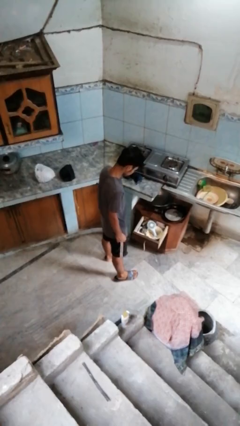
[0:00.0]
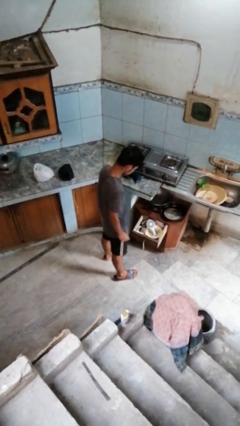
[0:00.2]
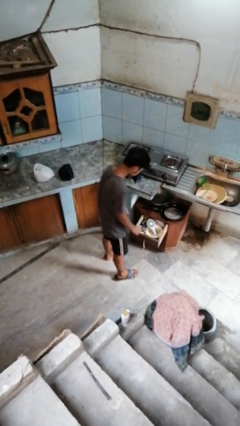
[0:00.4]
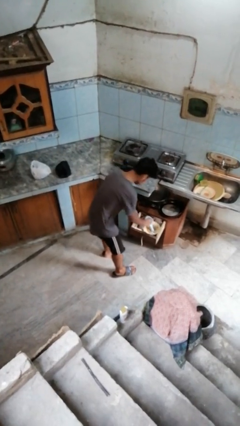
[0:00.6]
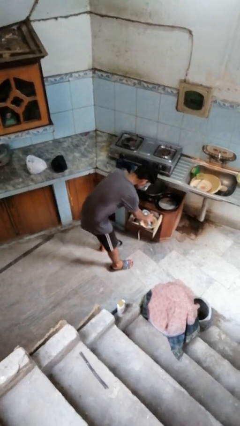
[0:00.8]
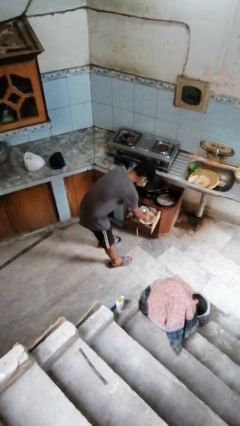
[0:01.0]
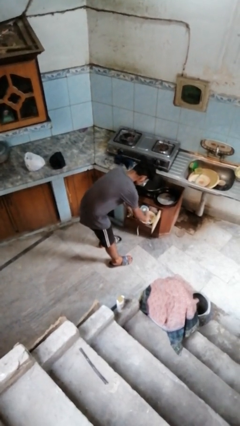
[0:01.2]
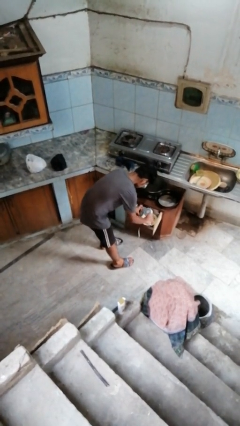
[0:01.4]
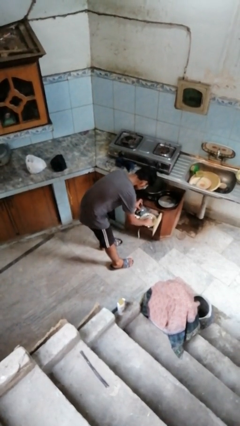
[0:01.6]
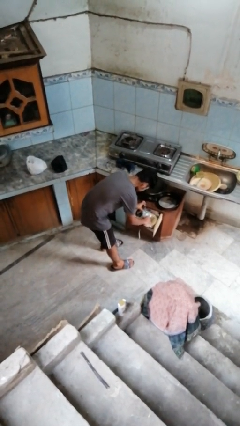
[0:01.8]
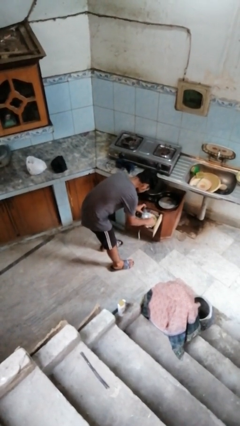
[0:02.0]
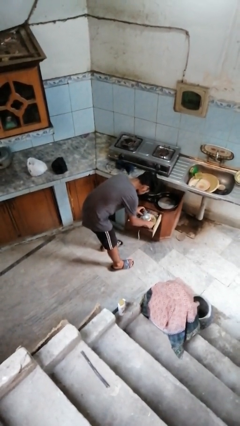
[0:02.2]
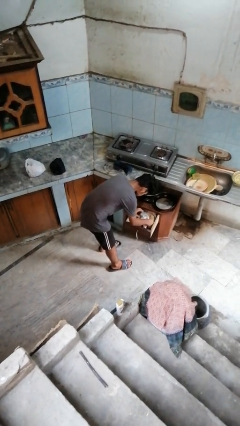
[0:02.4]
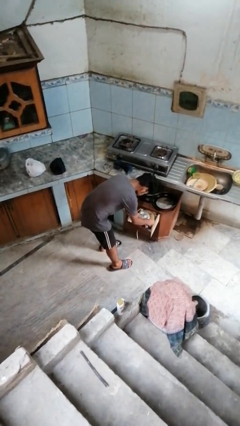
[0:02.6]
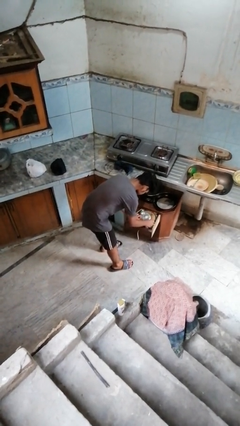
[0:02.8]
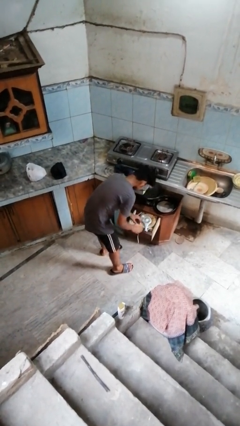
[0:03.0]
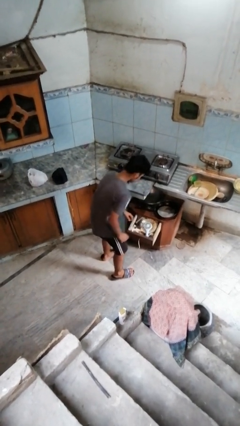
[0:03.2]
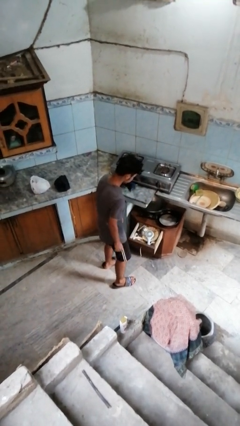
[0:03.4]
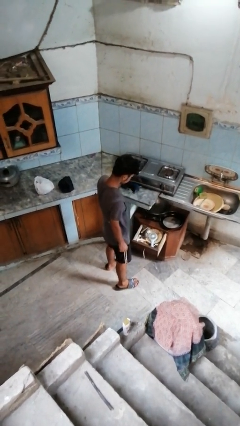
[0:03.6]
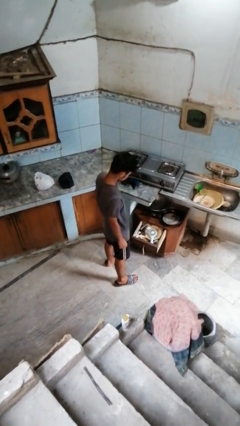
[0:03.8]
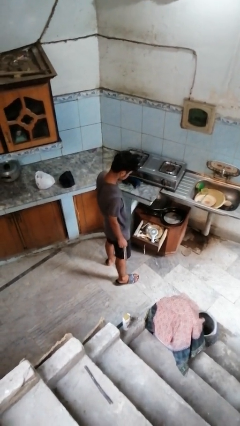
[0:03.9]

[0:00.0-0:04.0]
person searches in kitchen drawer

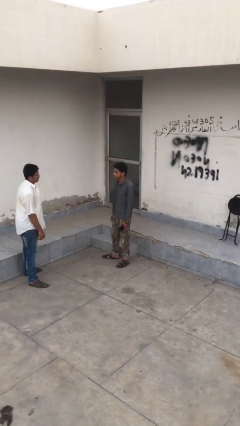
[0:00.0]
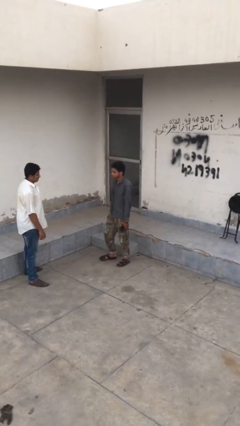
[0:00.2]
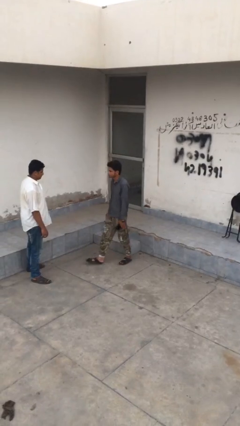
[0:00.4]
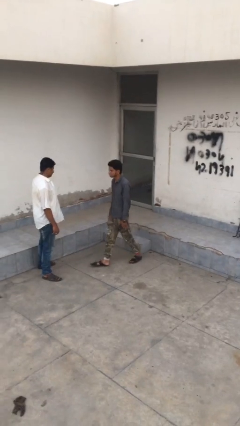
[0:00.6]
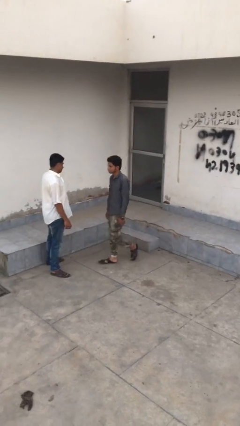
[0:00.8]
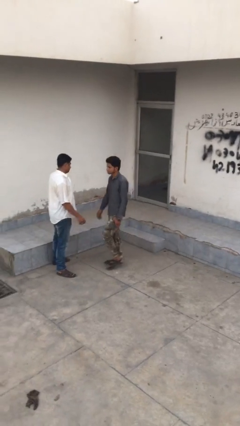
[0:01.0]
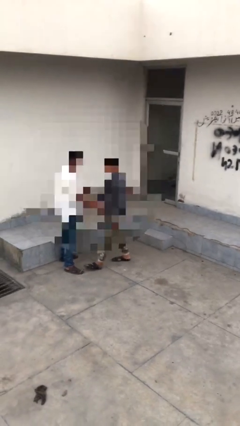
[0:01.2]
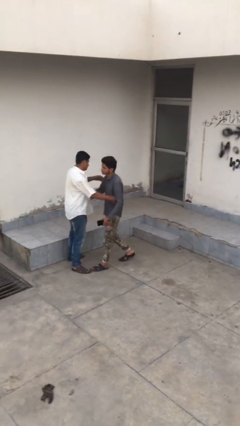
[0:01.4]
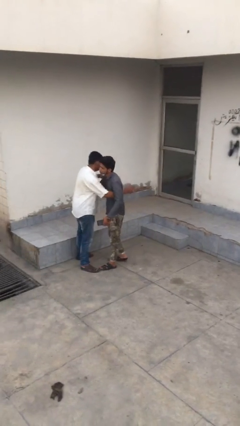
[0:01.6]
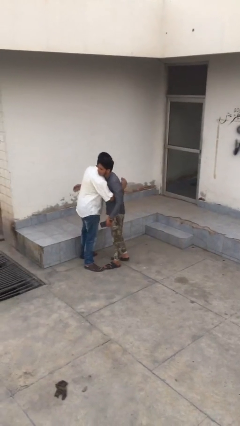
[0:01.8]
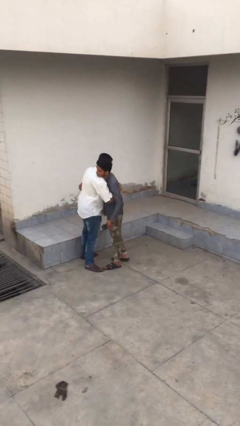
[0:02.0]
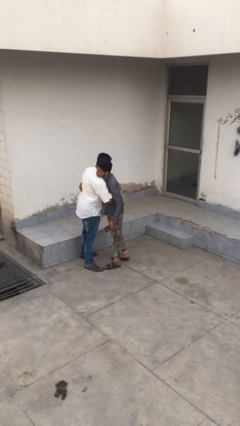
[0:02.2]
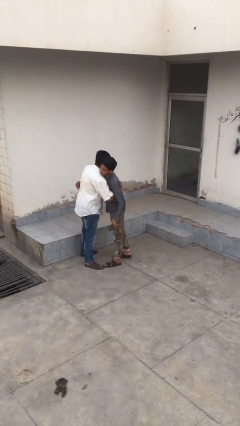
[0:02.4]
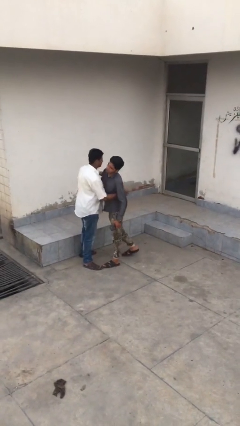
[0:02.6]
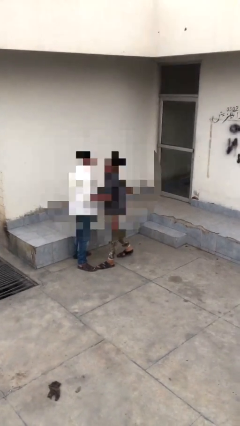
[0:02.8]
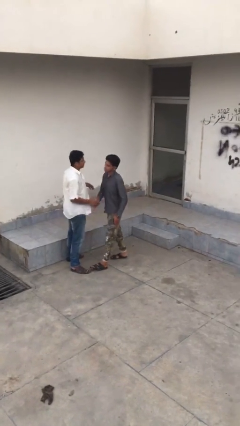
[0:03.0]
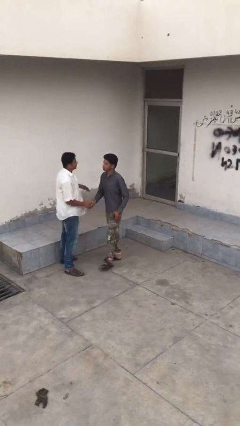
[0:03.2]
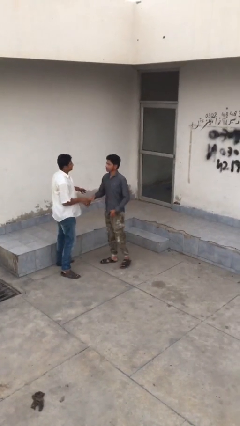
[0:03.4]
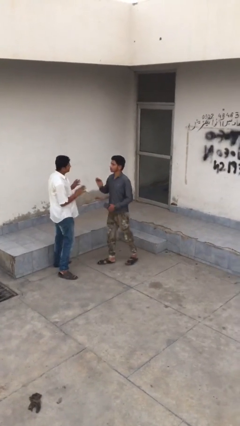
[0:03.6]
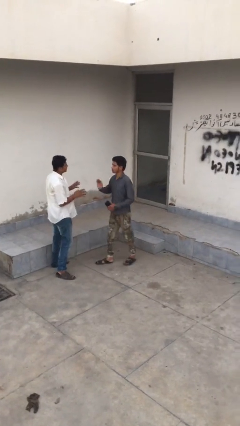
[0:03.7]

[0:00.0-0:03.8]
person embraces person

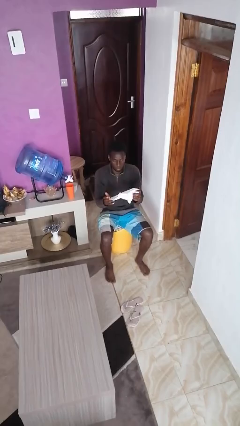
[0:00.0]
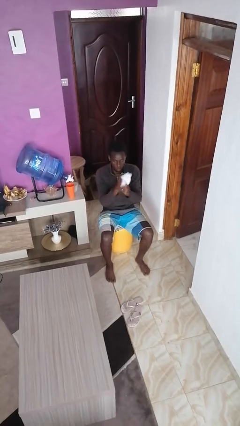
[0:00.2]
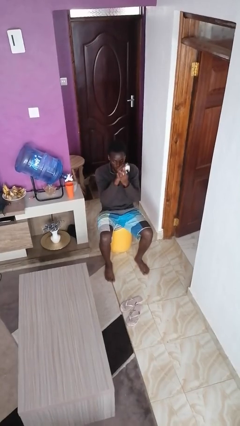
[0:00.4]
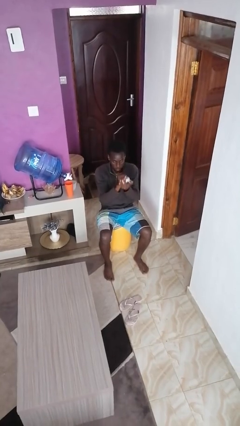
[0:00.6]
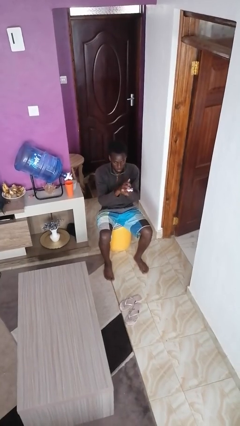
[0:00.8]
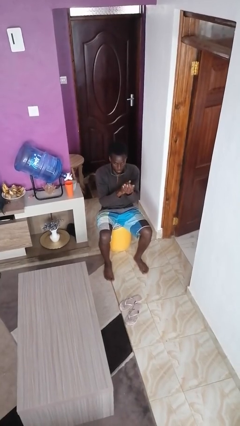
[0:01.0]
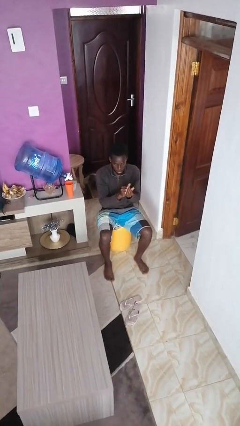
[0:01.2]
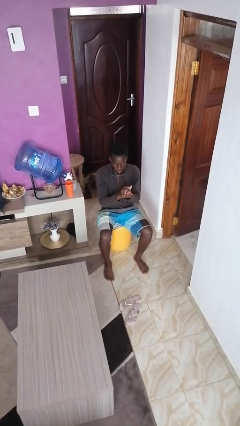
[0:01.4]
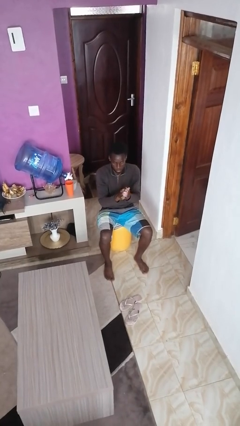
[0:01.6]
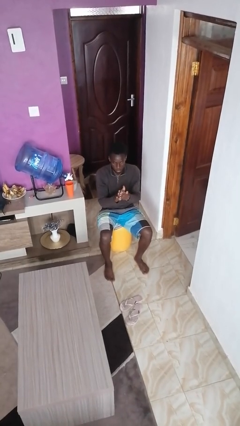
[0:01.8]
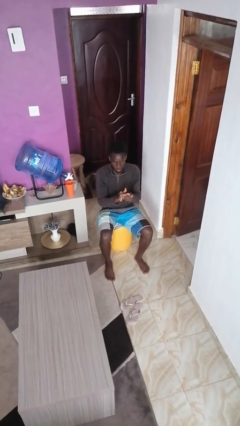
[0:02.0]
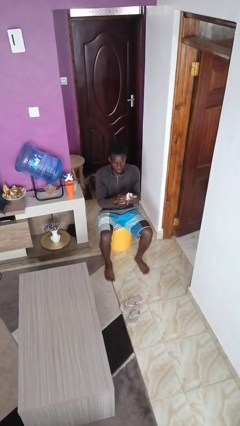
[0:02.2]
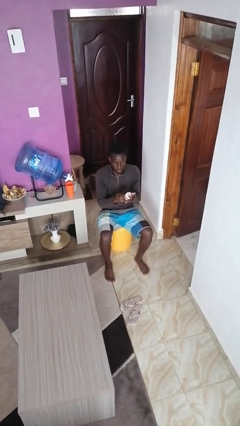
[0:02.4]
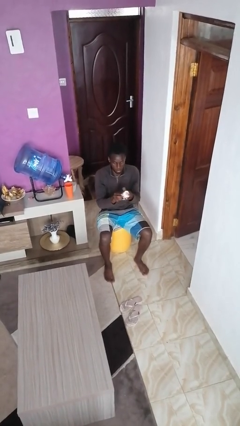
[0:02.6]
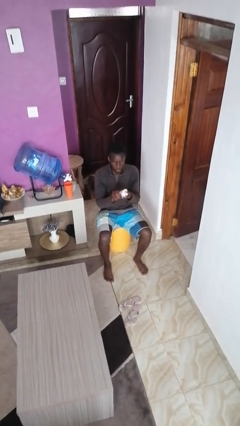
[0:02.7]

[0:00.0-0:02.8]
person crumples paper

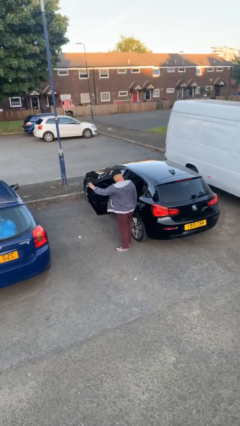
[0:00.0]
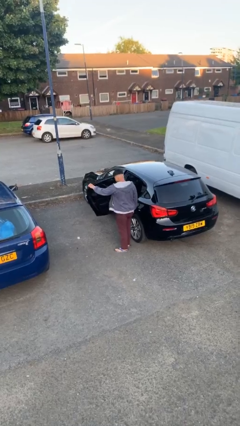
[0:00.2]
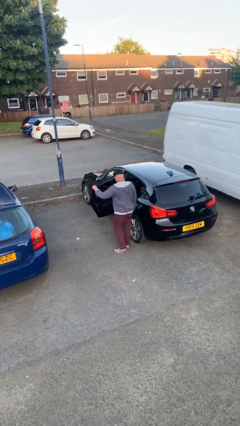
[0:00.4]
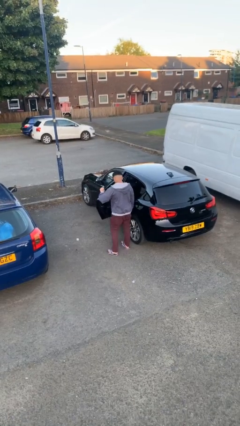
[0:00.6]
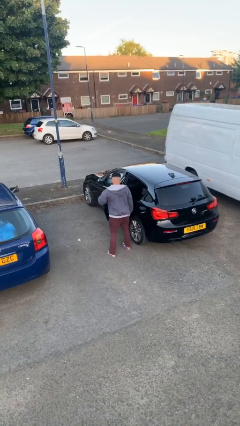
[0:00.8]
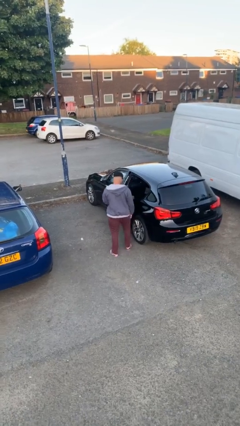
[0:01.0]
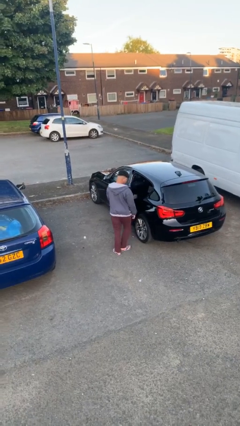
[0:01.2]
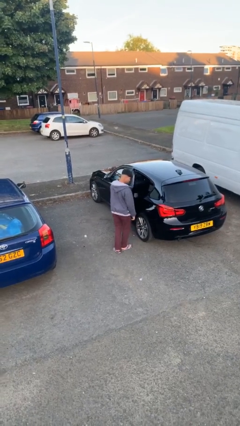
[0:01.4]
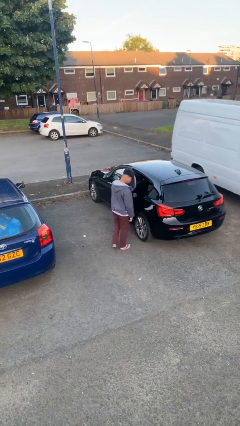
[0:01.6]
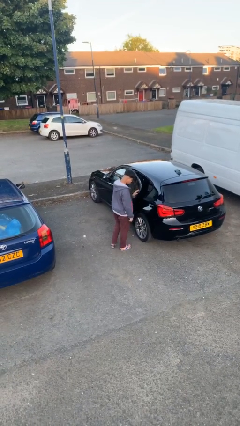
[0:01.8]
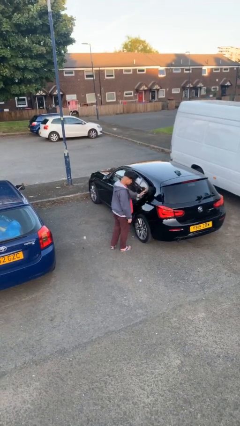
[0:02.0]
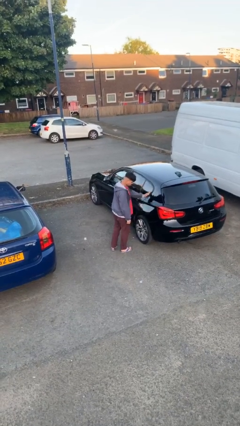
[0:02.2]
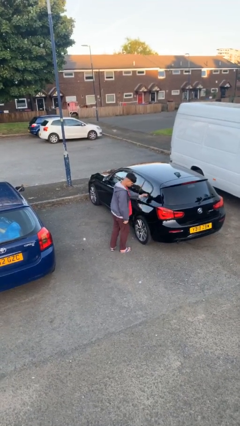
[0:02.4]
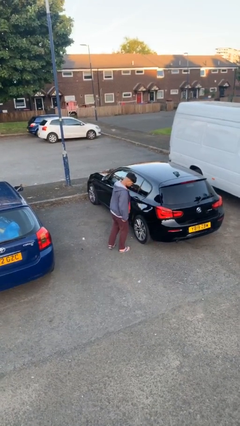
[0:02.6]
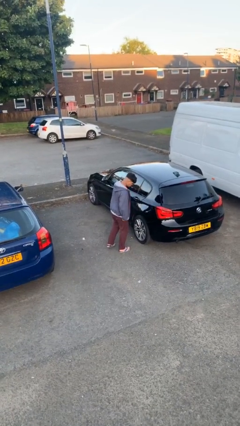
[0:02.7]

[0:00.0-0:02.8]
person closes car door

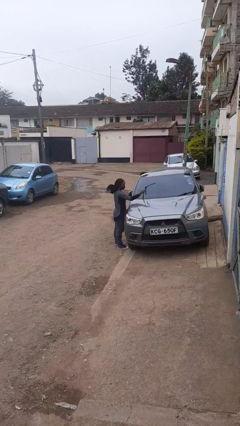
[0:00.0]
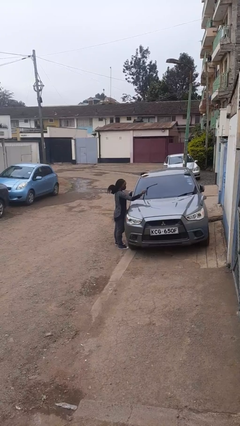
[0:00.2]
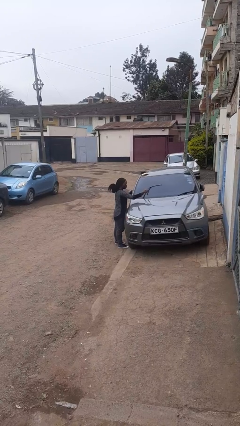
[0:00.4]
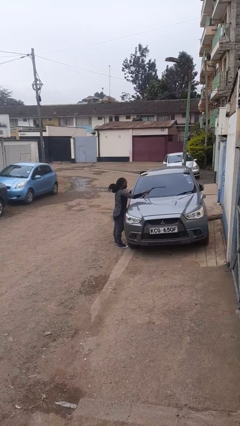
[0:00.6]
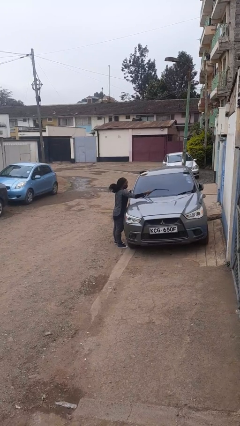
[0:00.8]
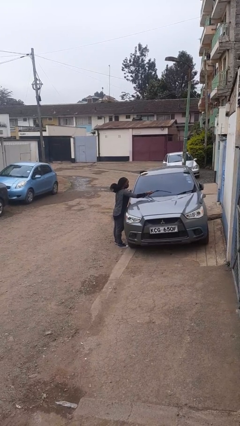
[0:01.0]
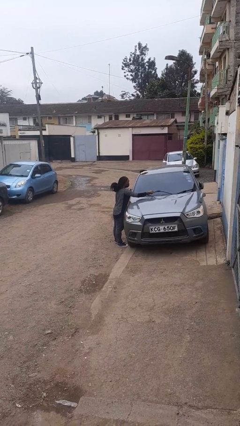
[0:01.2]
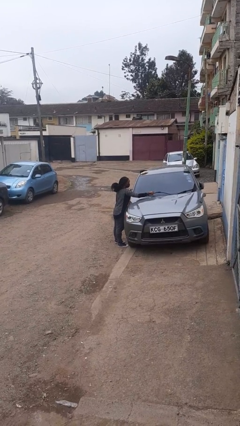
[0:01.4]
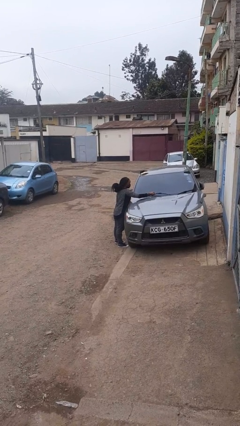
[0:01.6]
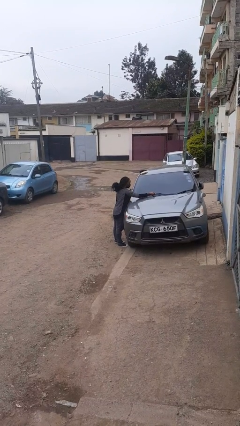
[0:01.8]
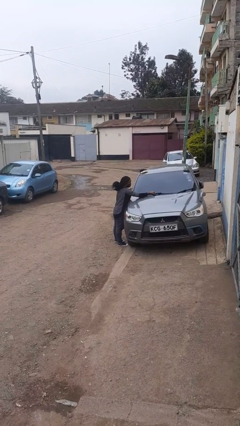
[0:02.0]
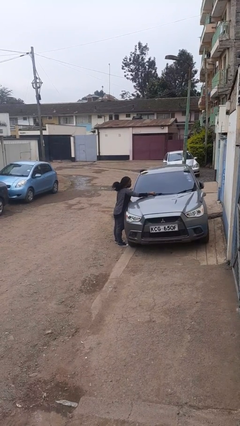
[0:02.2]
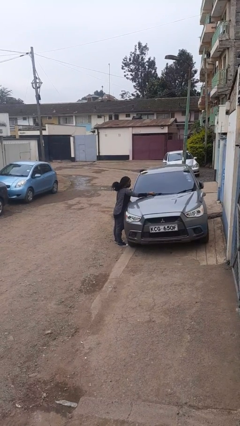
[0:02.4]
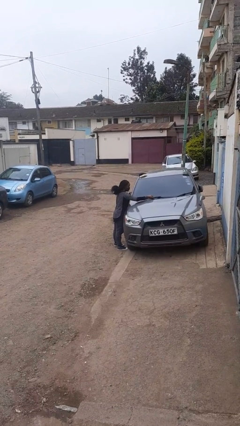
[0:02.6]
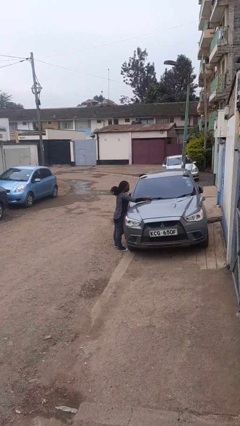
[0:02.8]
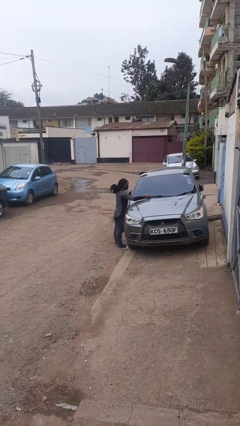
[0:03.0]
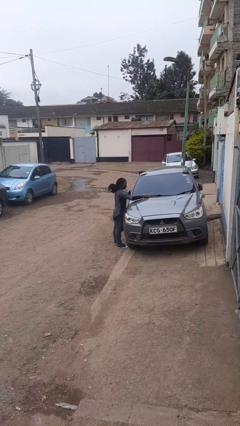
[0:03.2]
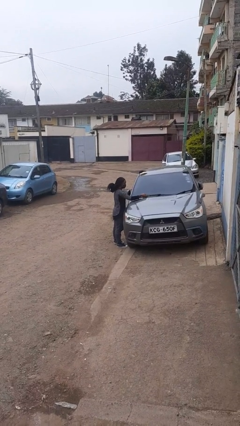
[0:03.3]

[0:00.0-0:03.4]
person flips down car wipers

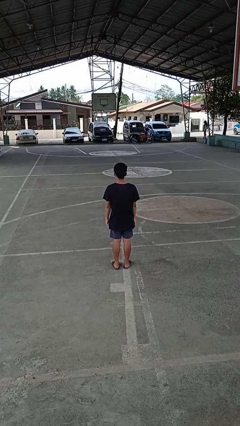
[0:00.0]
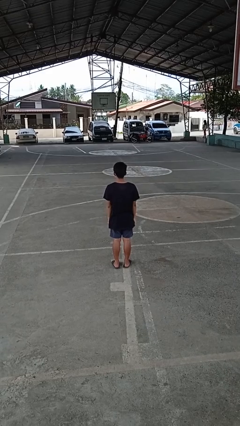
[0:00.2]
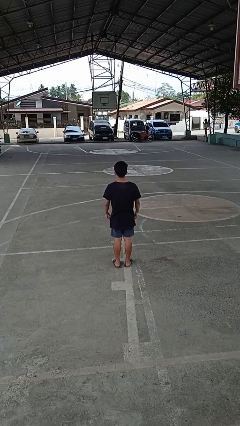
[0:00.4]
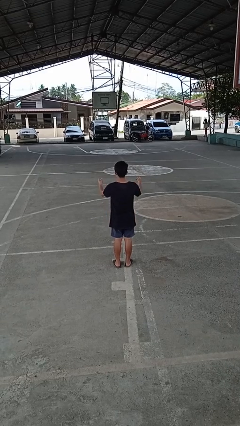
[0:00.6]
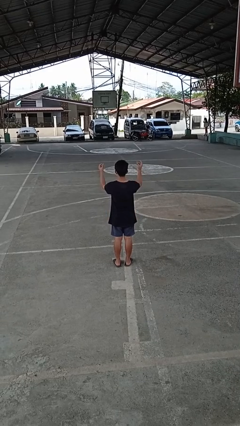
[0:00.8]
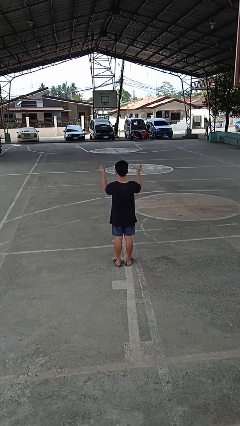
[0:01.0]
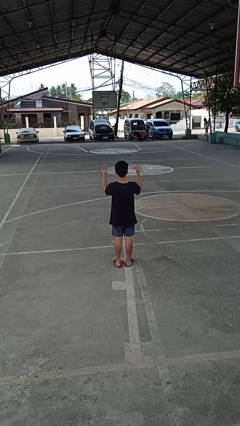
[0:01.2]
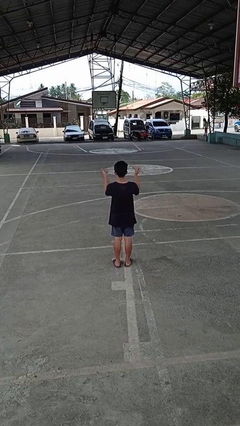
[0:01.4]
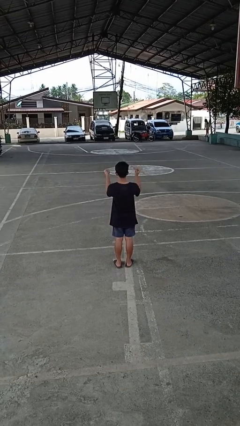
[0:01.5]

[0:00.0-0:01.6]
person snaps fingers
